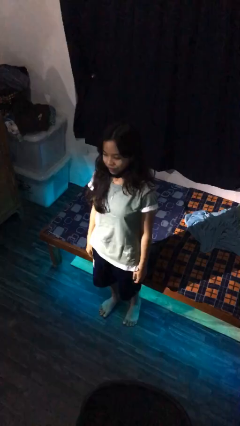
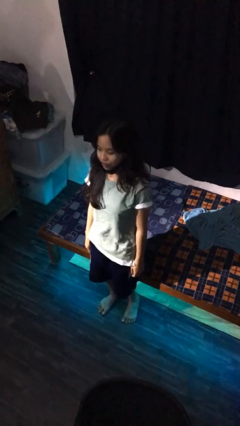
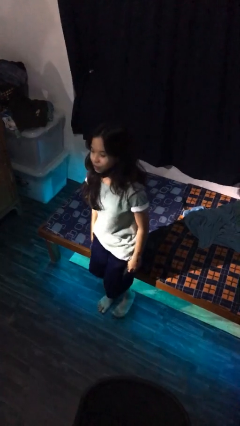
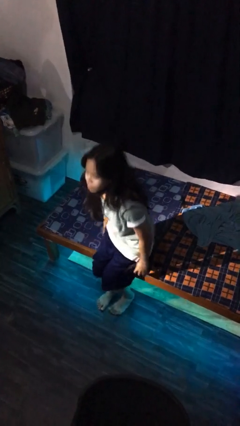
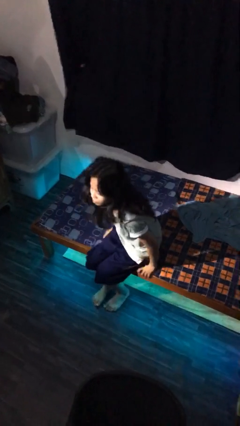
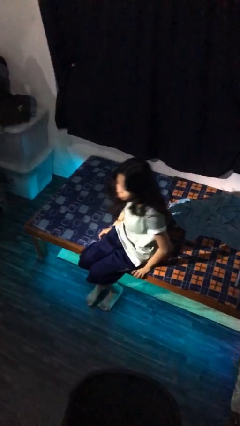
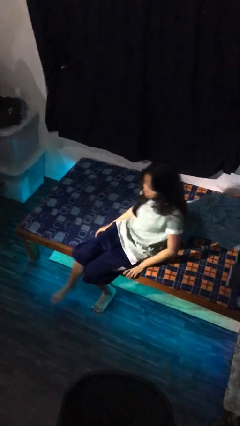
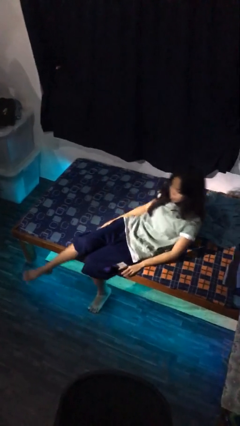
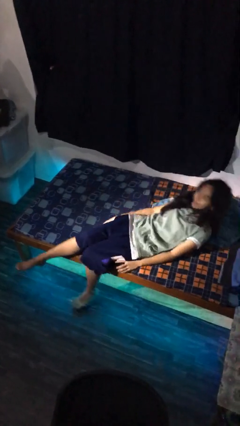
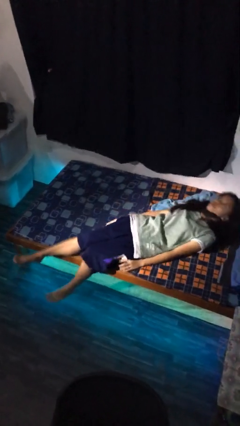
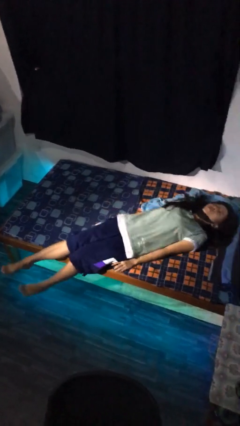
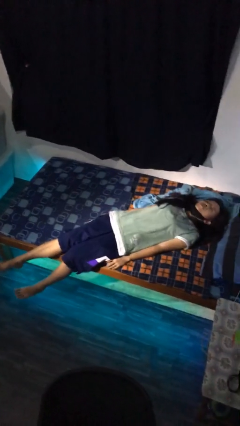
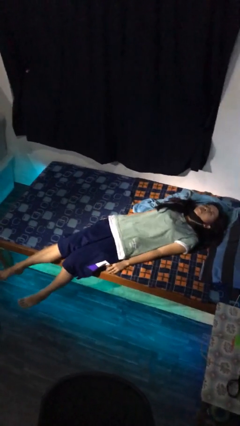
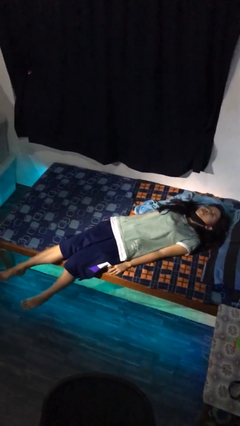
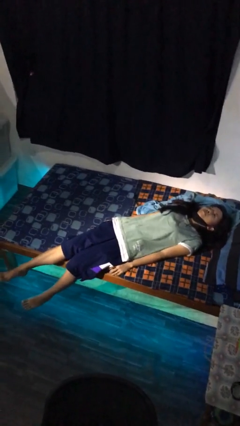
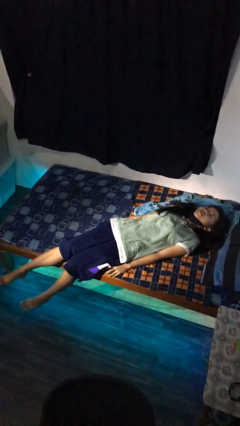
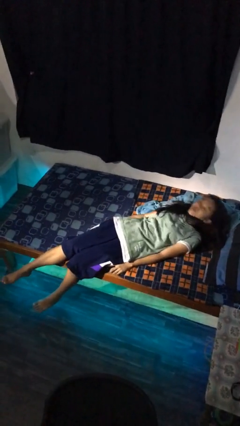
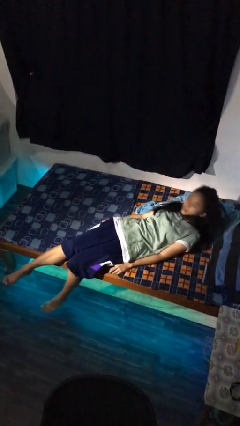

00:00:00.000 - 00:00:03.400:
person lies down on bed

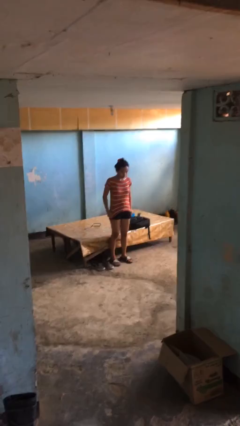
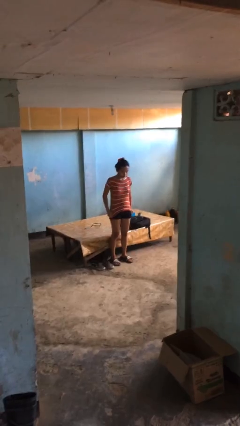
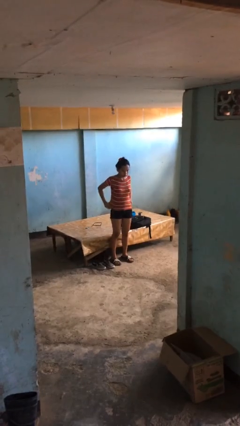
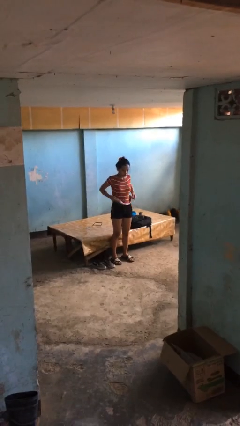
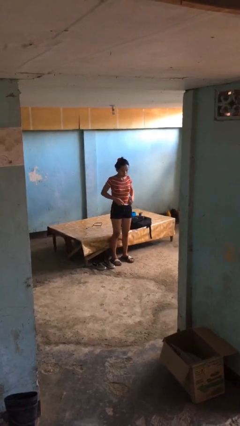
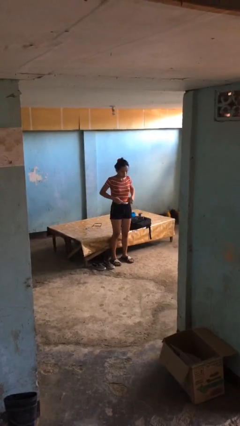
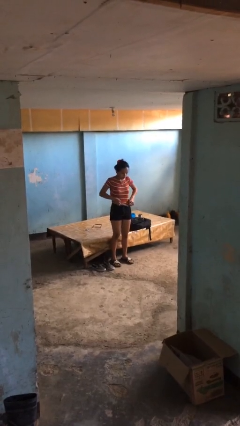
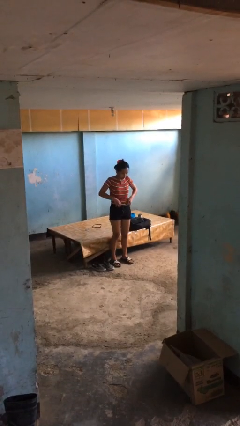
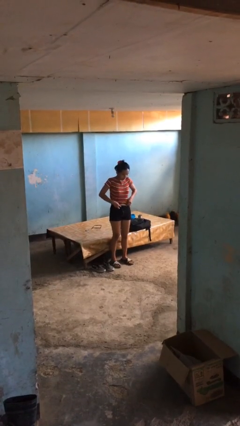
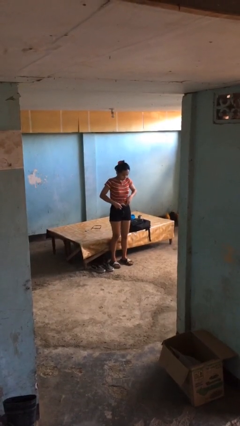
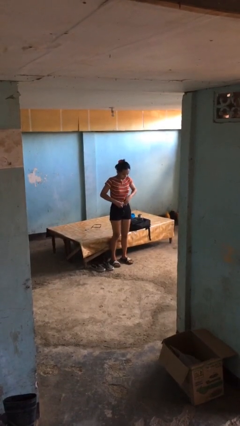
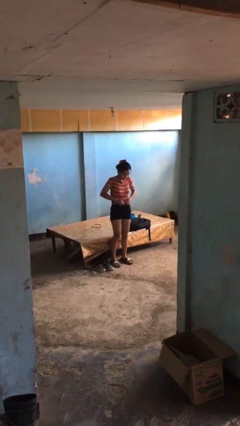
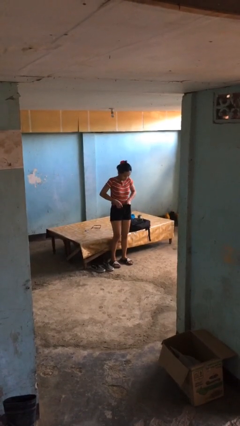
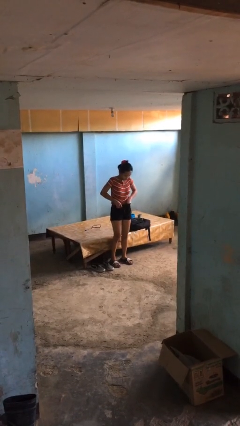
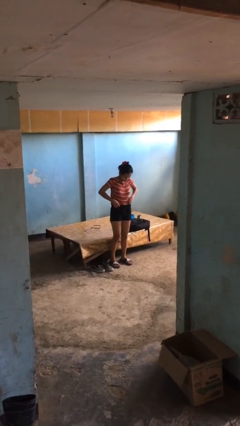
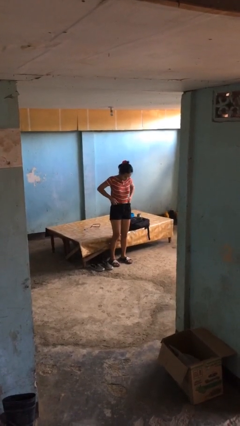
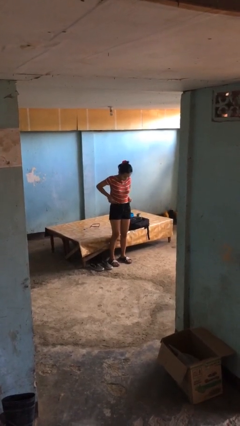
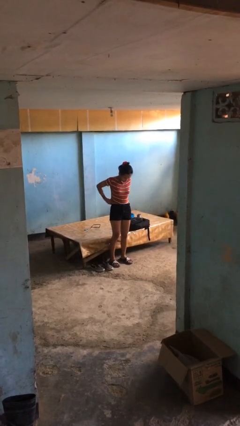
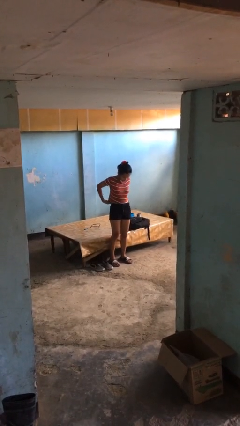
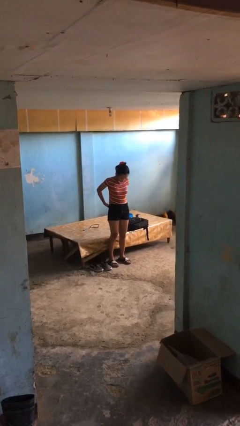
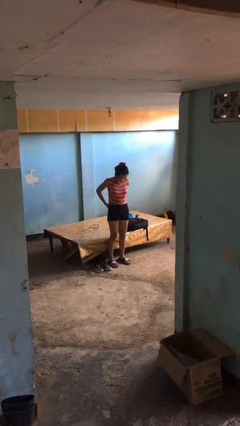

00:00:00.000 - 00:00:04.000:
person tucks in shirt

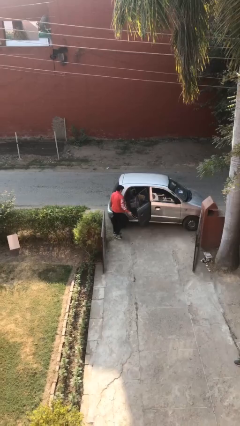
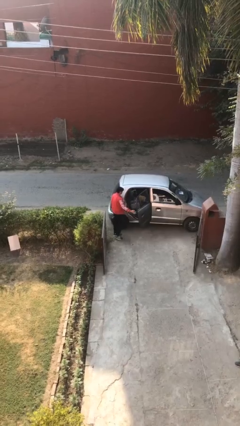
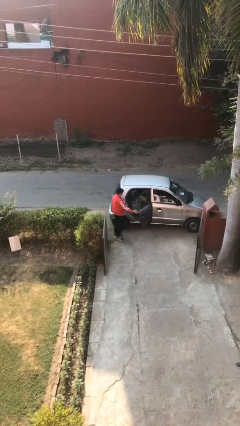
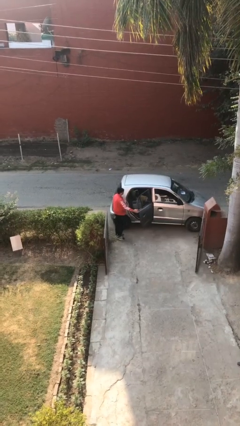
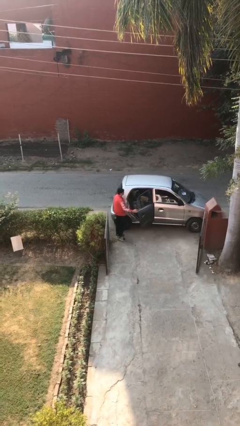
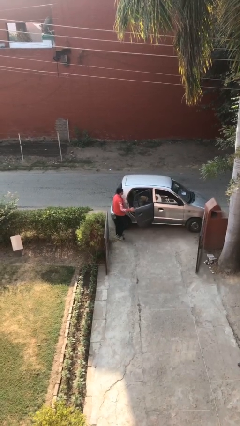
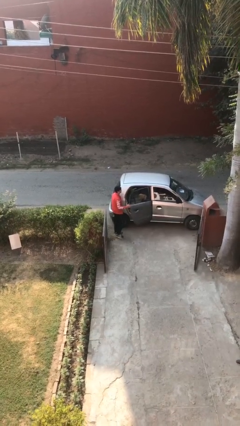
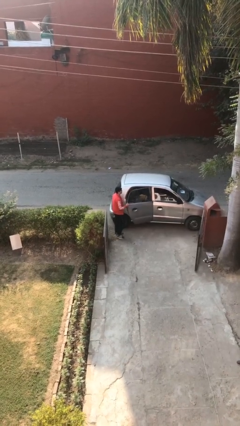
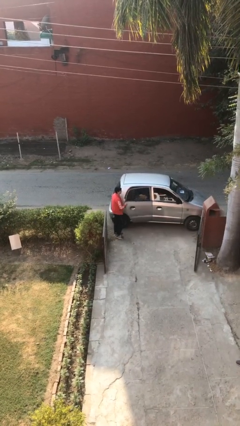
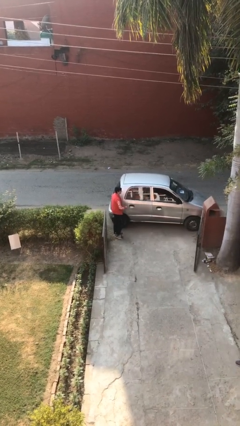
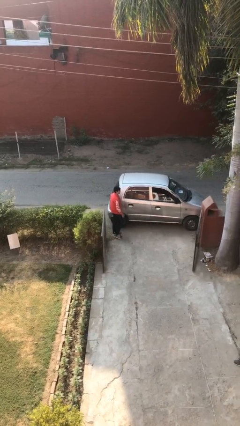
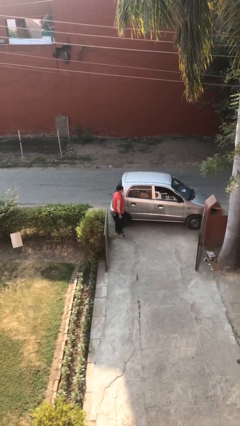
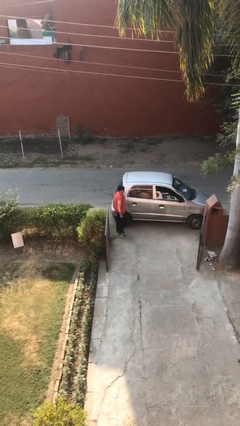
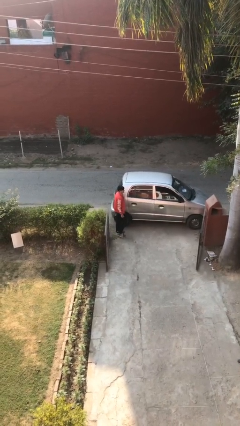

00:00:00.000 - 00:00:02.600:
person closes car door

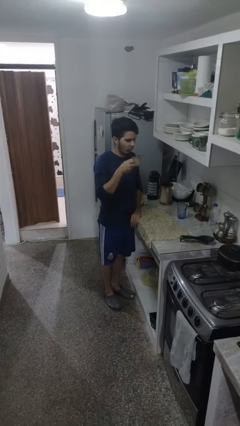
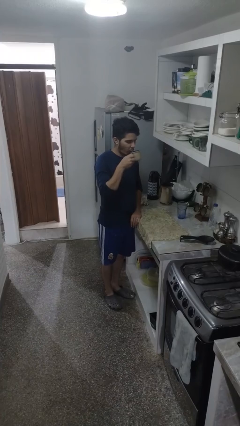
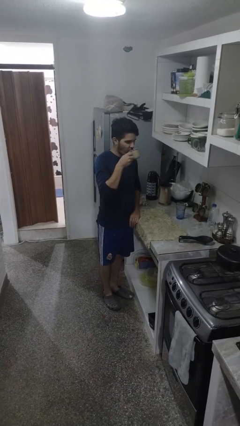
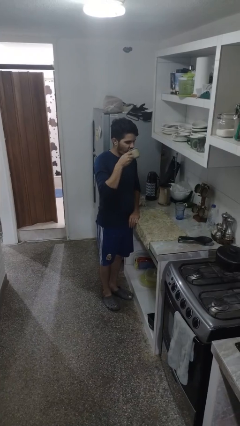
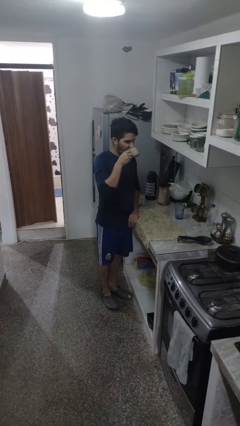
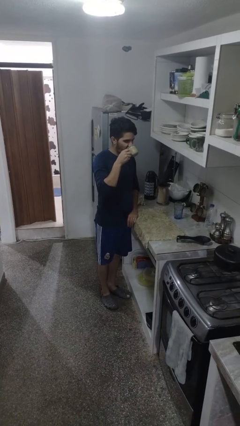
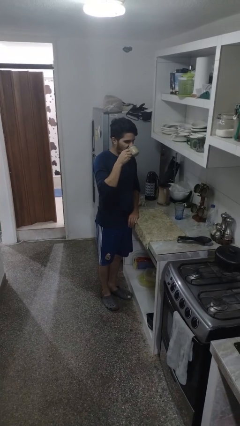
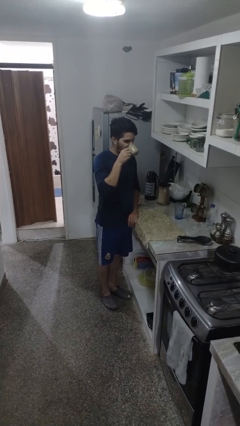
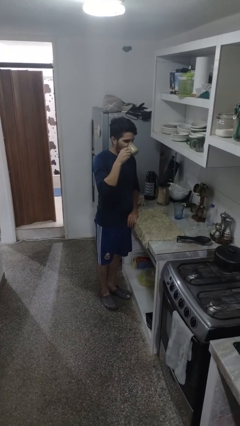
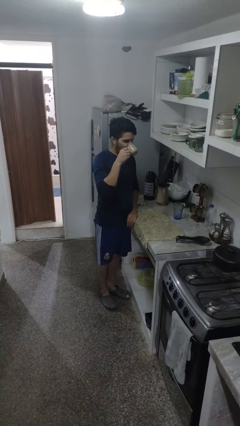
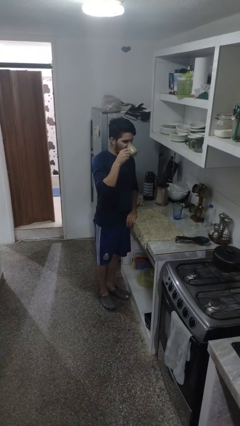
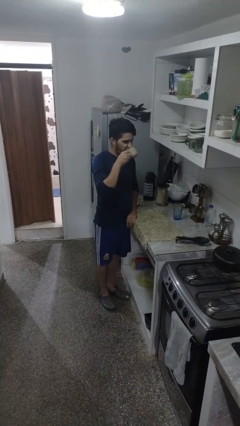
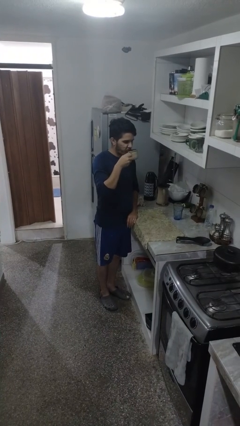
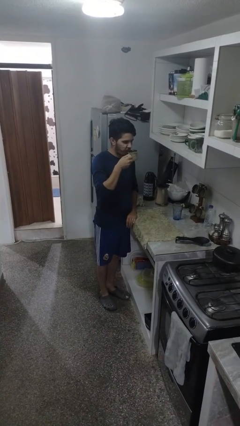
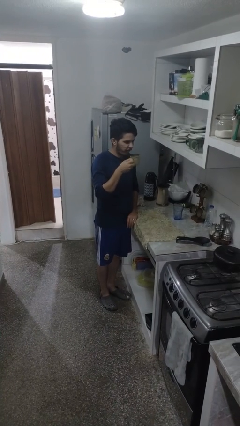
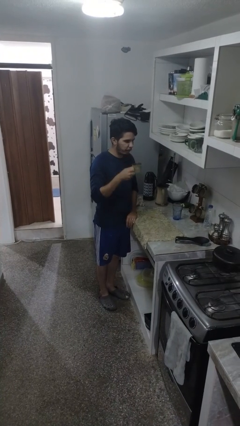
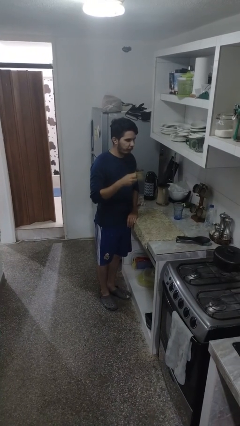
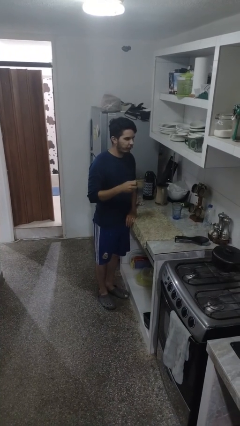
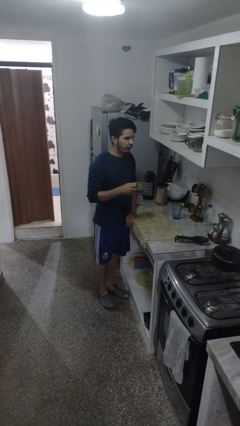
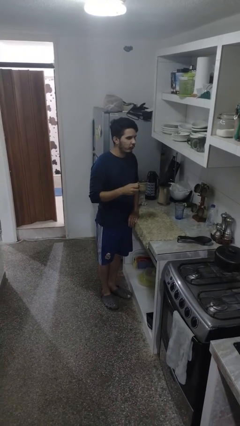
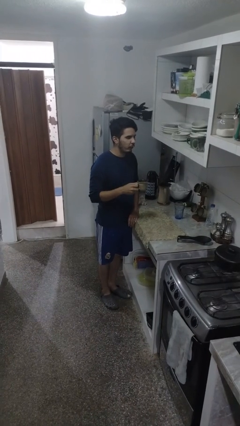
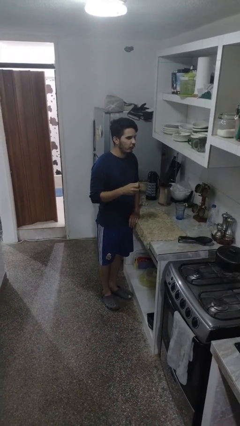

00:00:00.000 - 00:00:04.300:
person drinks from mug

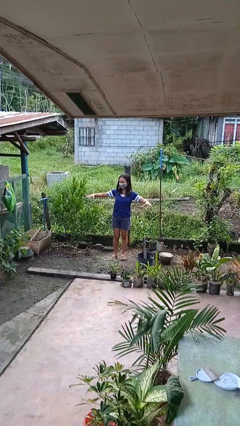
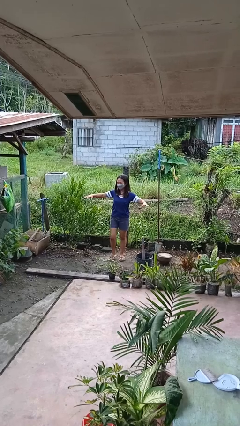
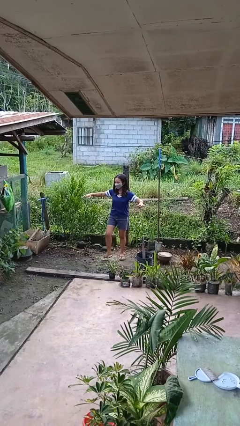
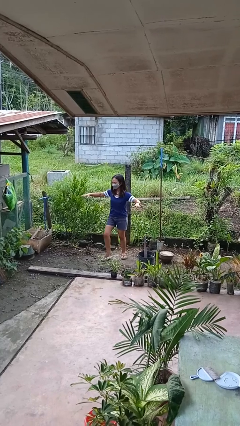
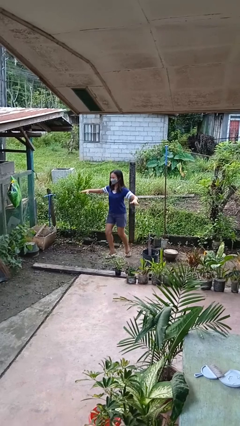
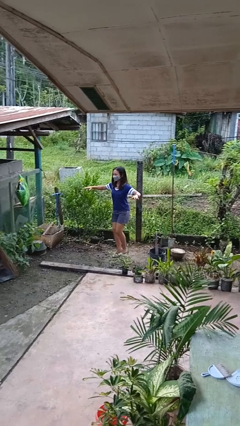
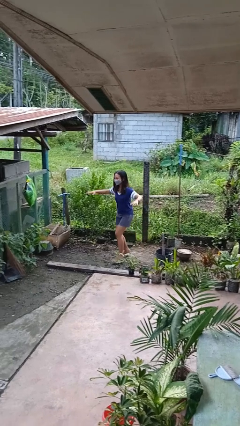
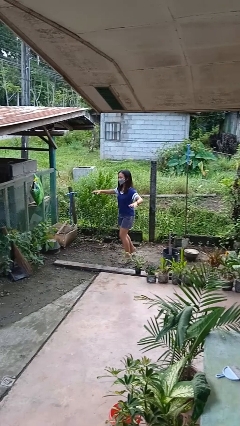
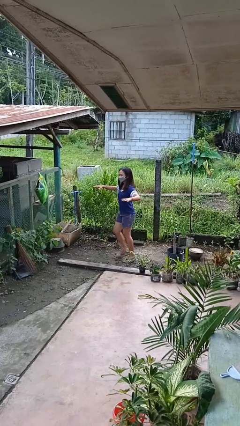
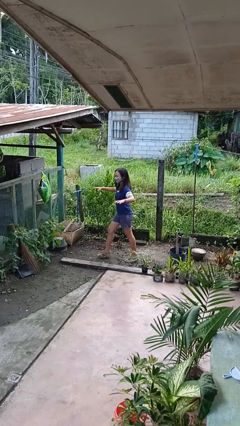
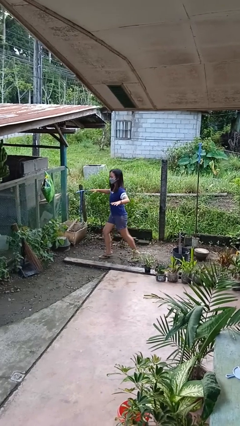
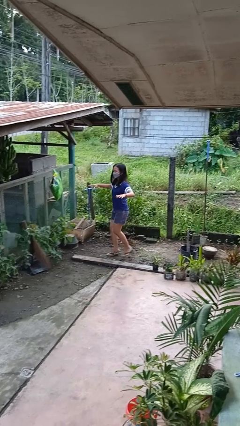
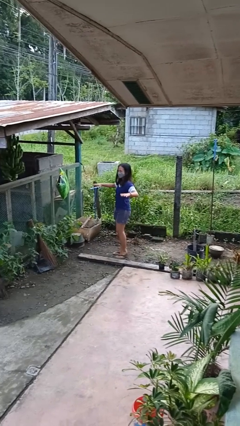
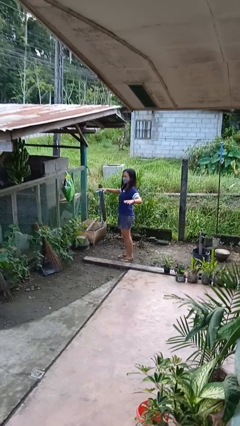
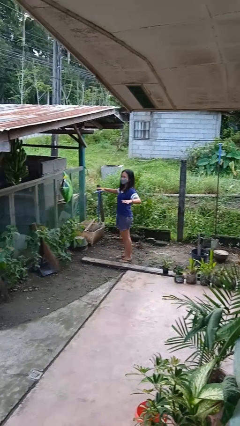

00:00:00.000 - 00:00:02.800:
person walks tiptoe

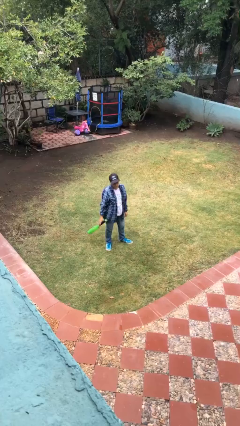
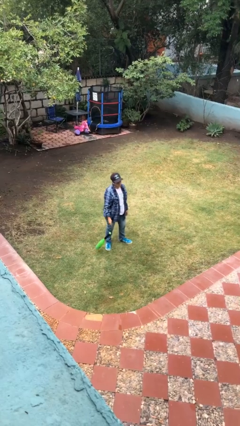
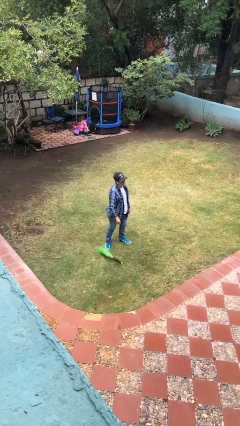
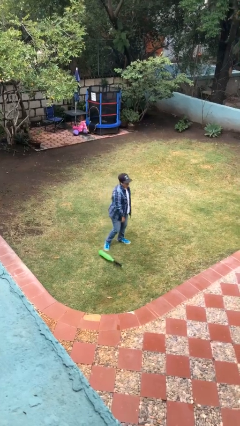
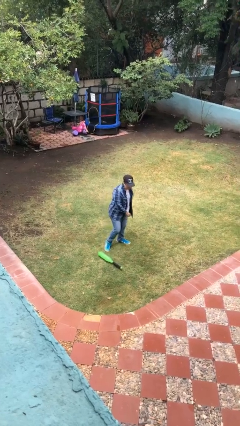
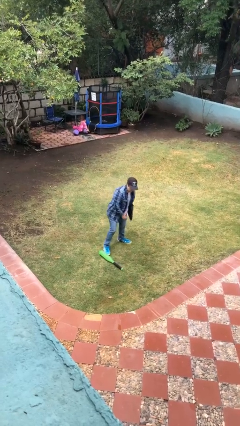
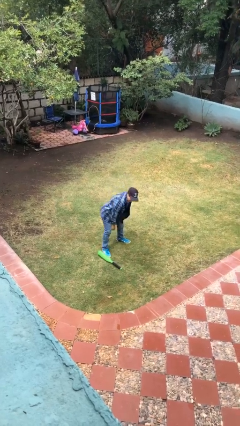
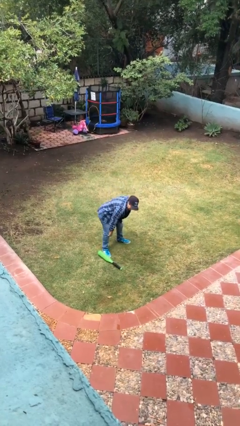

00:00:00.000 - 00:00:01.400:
person drops object
